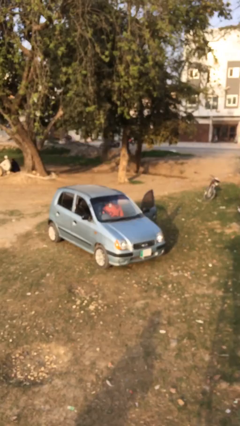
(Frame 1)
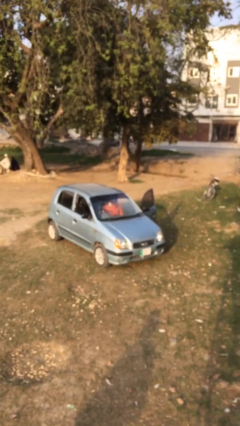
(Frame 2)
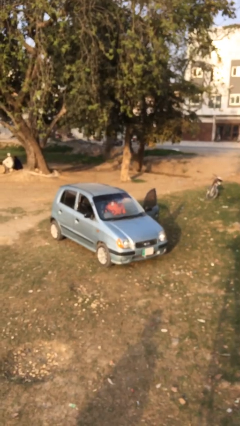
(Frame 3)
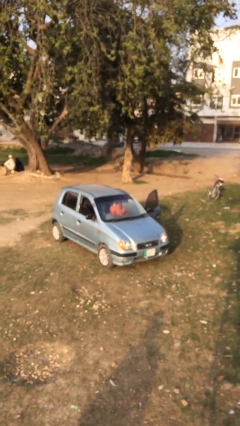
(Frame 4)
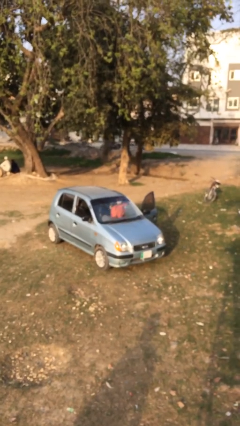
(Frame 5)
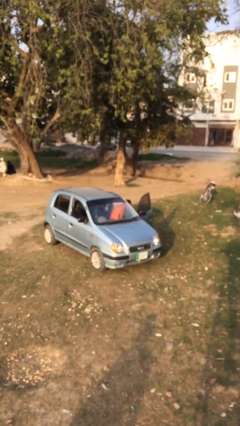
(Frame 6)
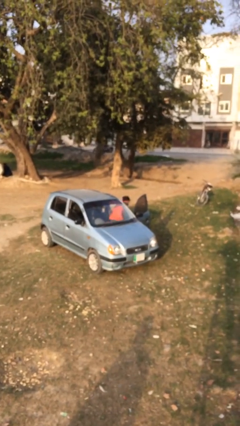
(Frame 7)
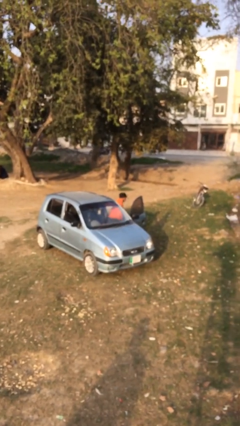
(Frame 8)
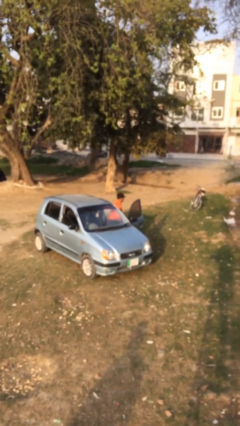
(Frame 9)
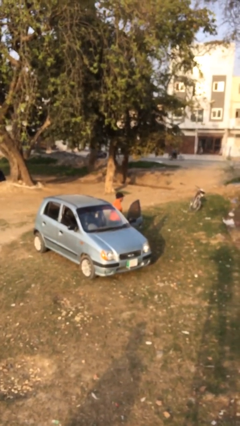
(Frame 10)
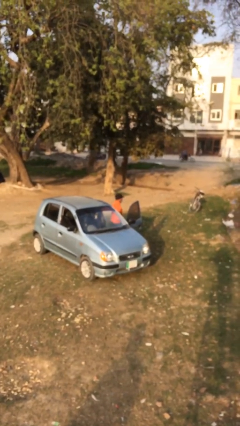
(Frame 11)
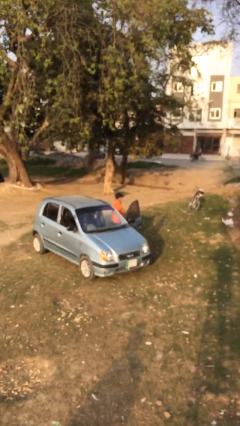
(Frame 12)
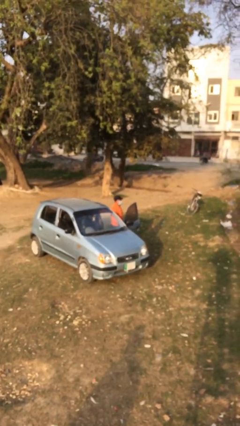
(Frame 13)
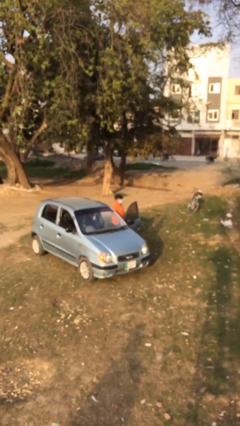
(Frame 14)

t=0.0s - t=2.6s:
person exits car

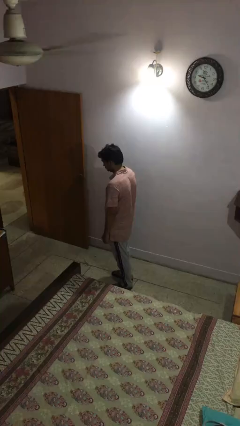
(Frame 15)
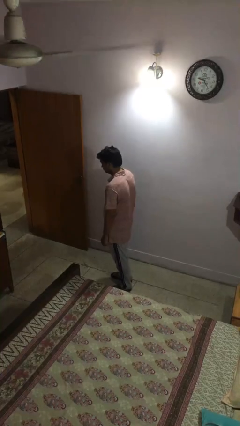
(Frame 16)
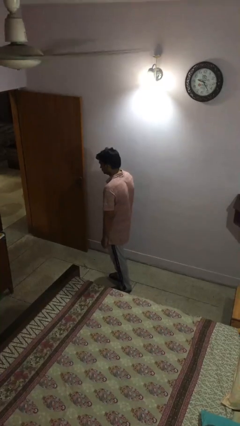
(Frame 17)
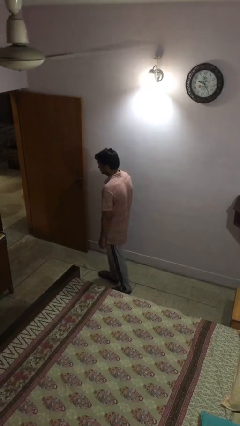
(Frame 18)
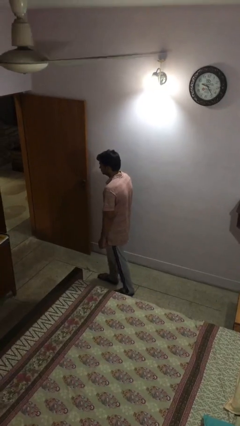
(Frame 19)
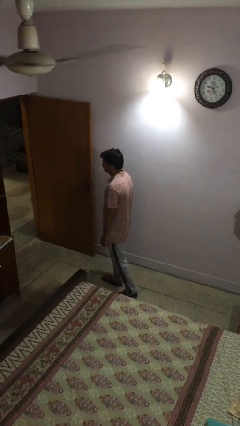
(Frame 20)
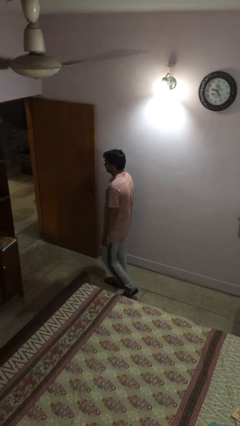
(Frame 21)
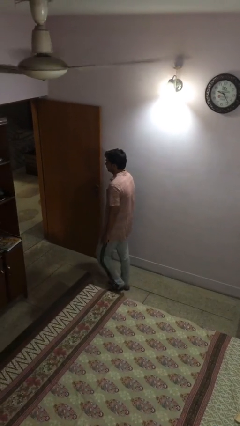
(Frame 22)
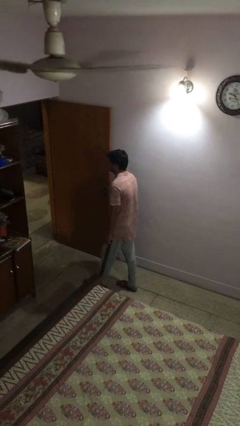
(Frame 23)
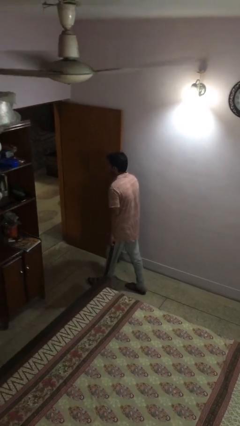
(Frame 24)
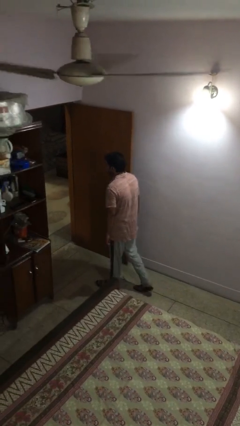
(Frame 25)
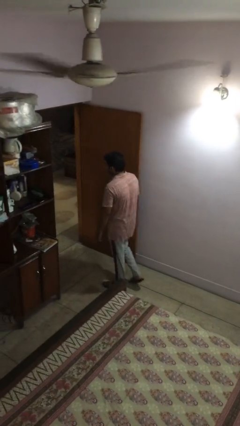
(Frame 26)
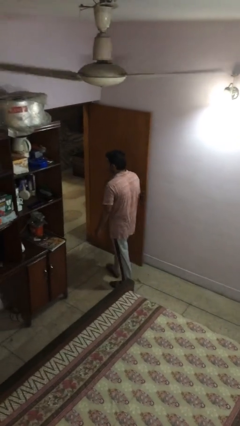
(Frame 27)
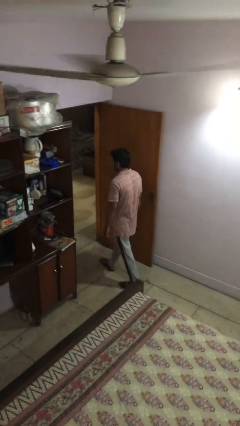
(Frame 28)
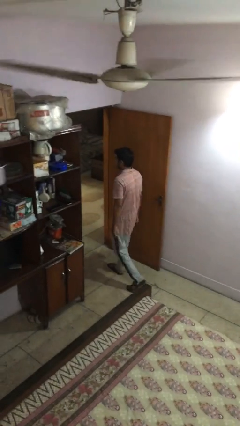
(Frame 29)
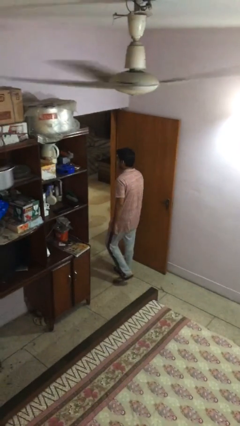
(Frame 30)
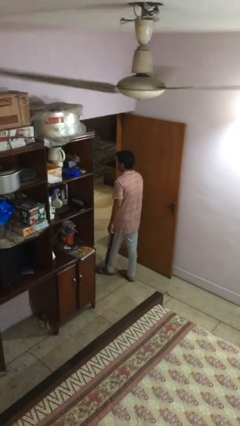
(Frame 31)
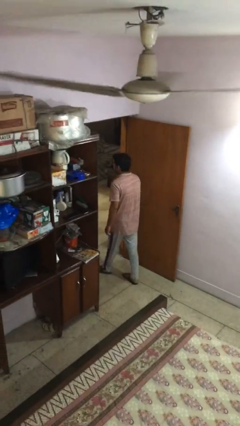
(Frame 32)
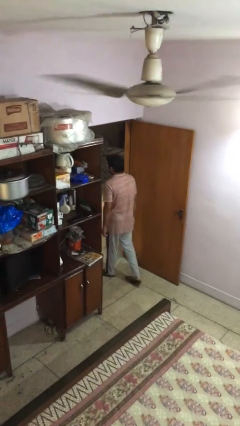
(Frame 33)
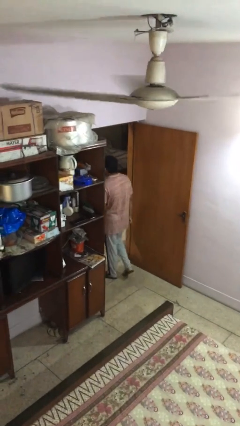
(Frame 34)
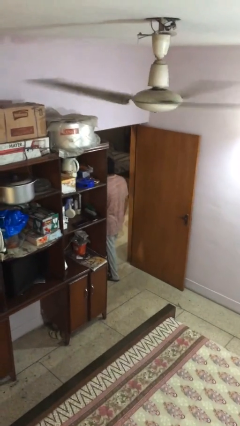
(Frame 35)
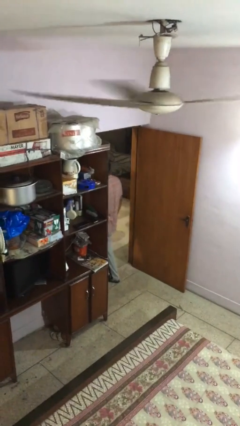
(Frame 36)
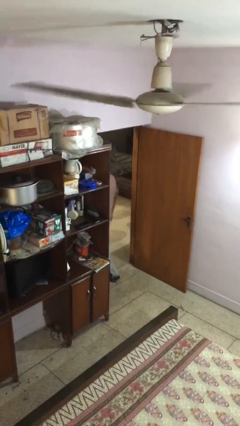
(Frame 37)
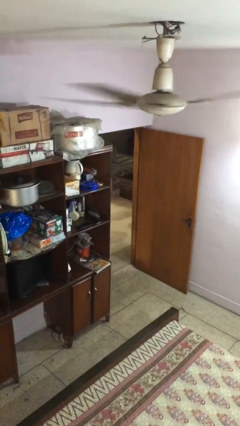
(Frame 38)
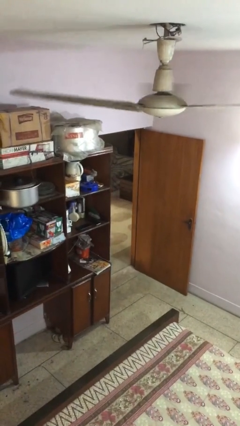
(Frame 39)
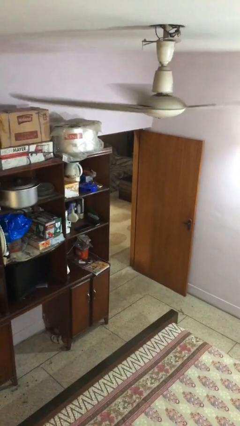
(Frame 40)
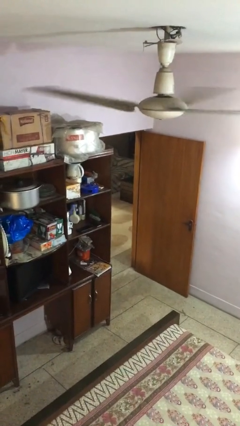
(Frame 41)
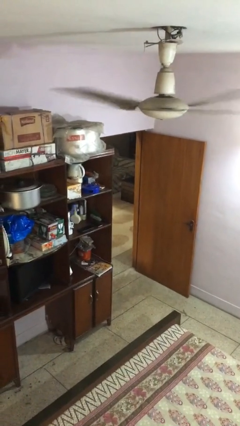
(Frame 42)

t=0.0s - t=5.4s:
person exits scene through structure

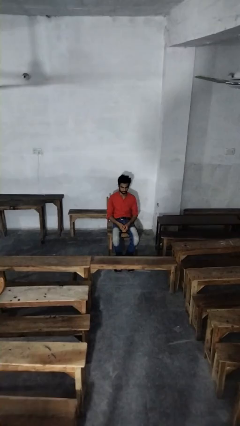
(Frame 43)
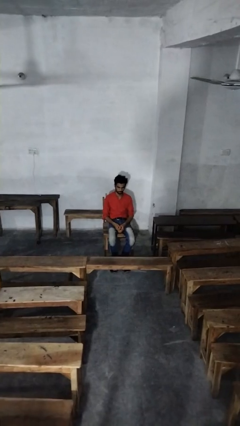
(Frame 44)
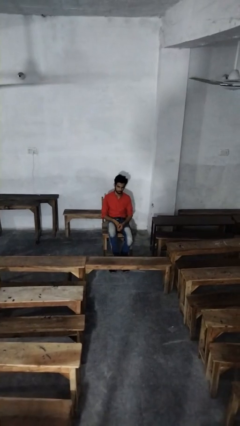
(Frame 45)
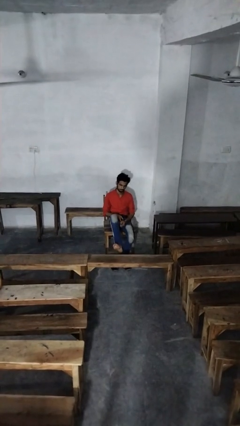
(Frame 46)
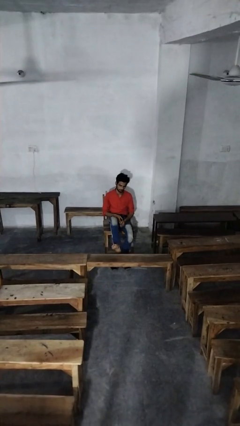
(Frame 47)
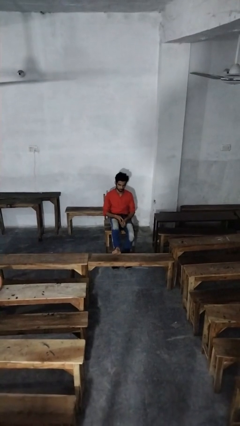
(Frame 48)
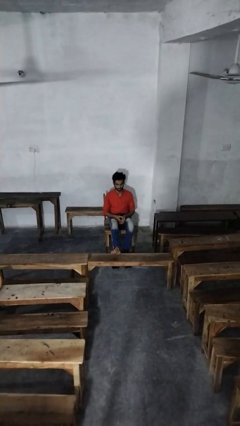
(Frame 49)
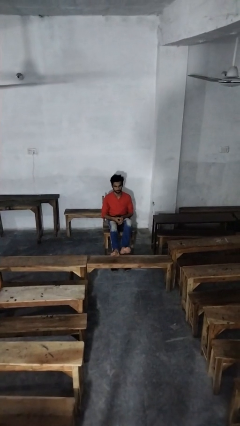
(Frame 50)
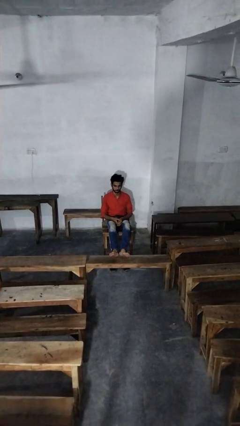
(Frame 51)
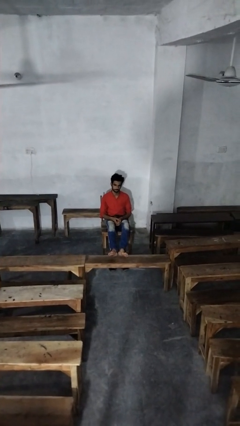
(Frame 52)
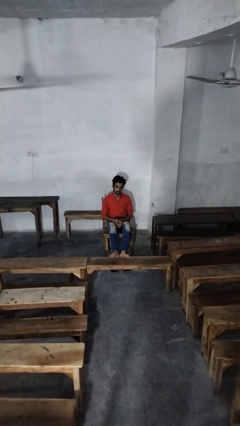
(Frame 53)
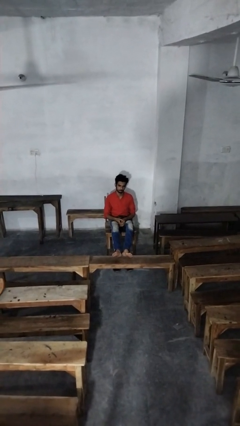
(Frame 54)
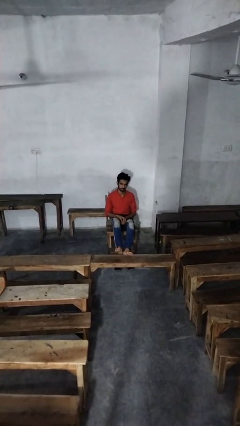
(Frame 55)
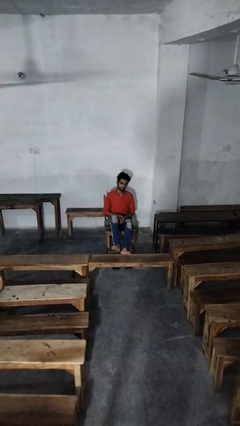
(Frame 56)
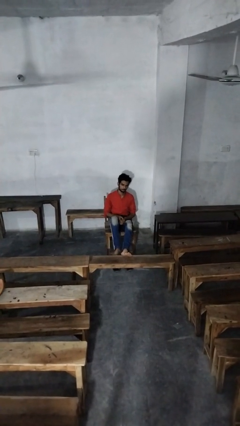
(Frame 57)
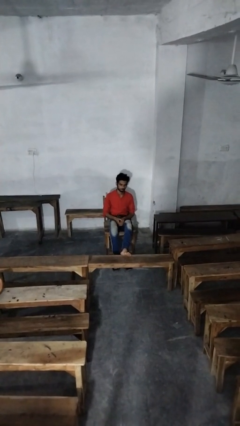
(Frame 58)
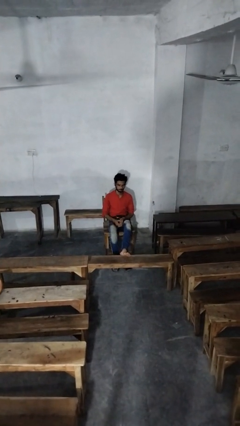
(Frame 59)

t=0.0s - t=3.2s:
person puts feet up

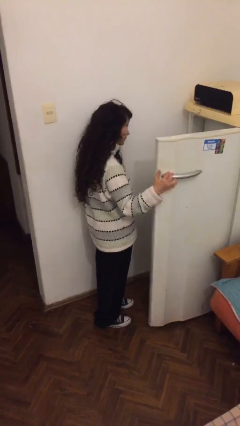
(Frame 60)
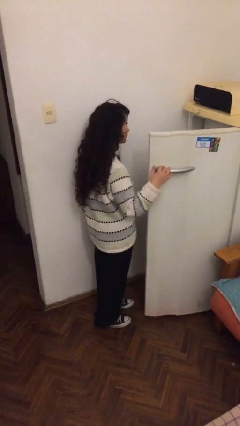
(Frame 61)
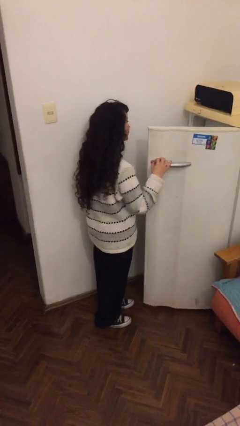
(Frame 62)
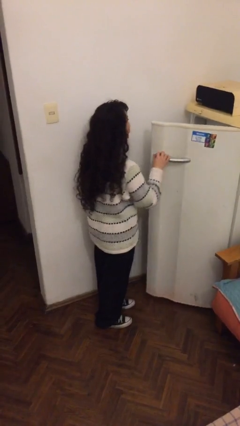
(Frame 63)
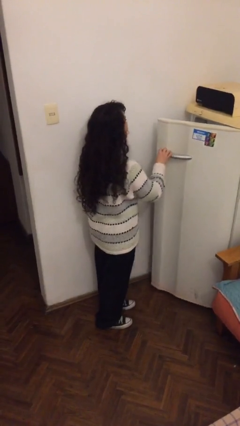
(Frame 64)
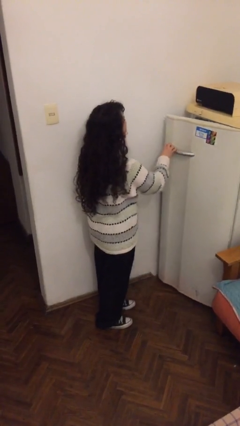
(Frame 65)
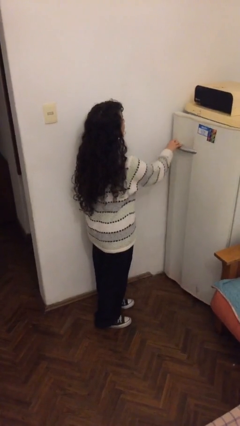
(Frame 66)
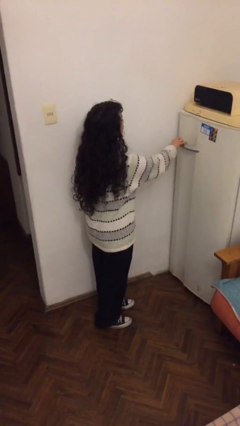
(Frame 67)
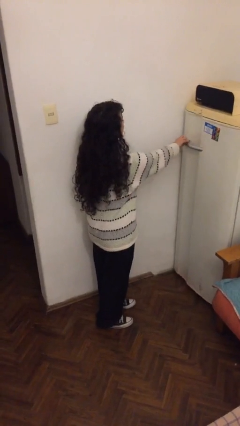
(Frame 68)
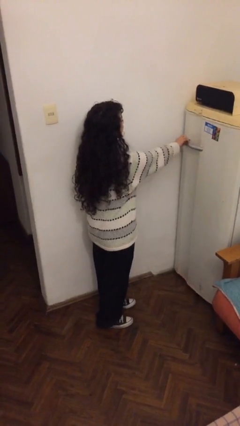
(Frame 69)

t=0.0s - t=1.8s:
person closes refrigerator

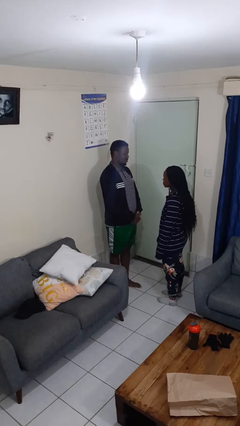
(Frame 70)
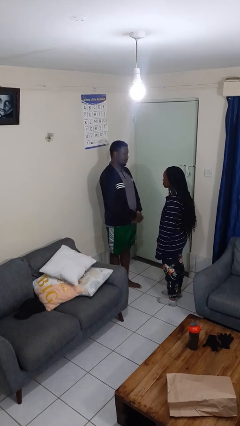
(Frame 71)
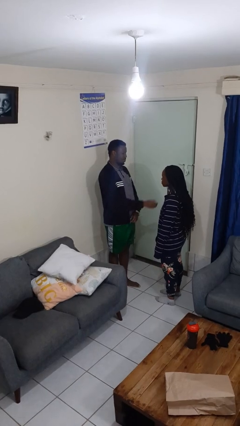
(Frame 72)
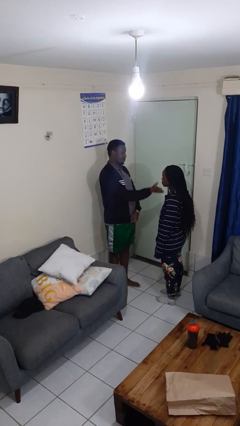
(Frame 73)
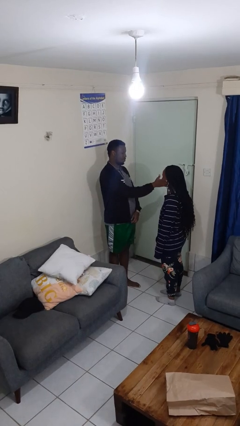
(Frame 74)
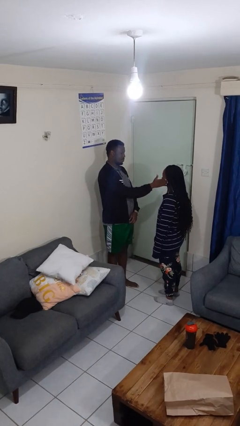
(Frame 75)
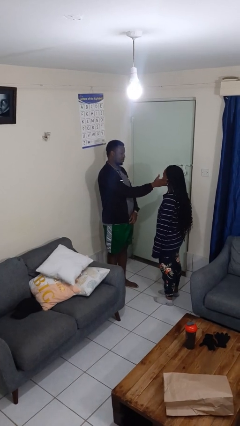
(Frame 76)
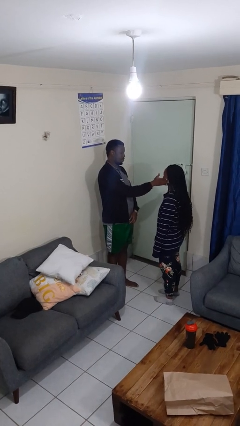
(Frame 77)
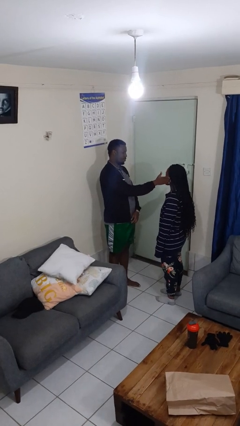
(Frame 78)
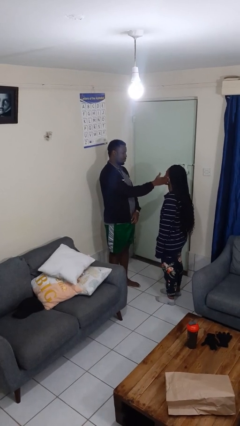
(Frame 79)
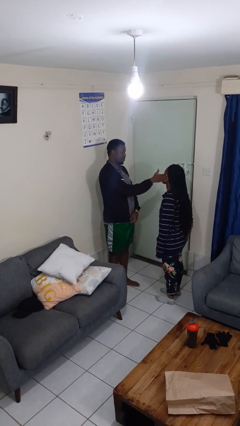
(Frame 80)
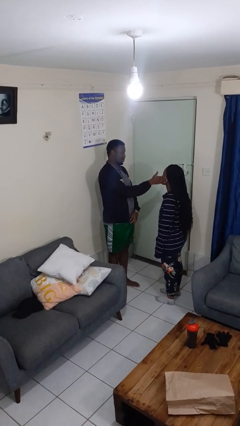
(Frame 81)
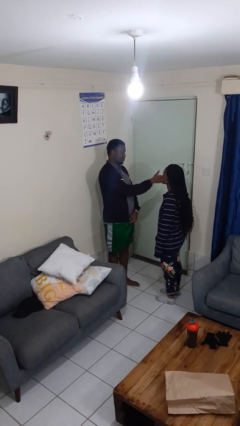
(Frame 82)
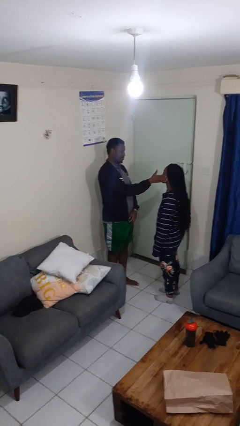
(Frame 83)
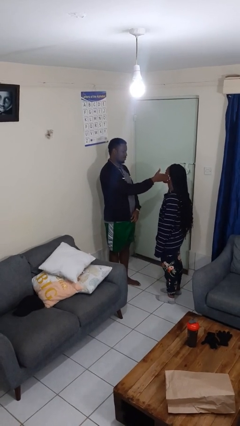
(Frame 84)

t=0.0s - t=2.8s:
person touches face of person

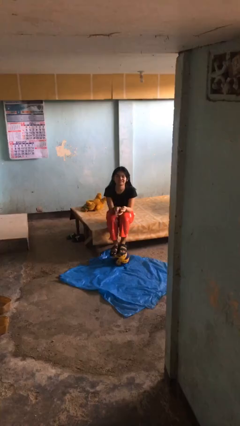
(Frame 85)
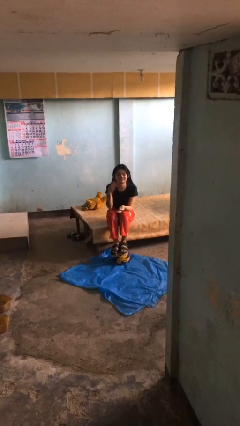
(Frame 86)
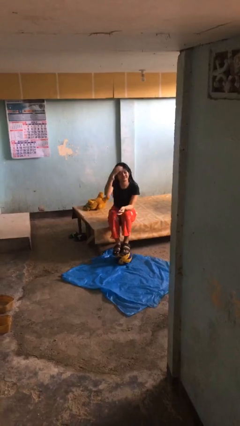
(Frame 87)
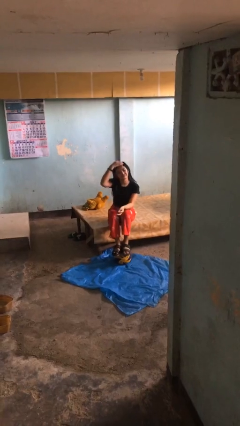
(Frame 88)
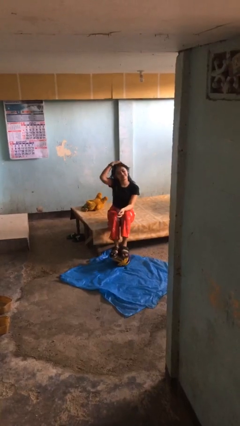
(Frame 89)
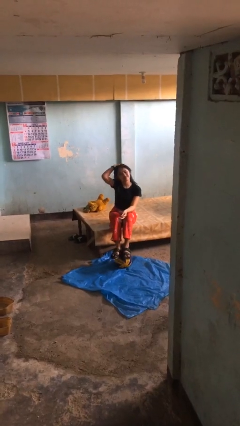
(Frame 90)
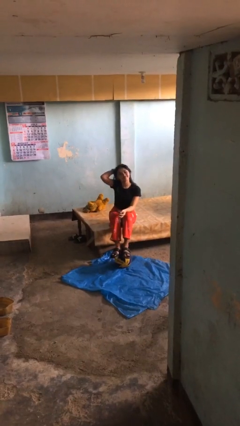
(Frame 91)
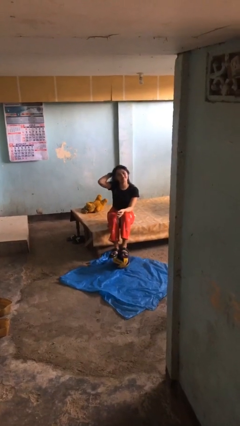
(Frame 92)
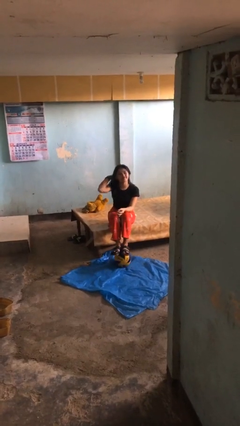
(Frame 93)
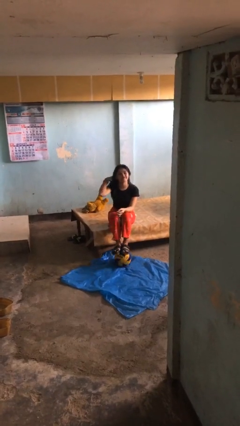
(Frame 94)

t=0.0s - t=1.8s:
person strokes hair
